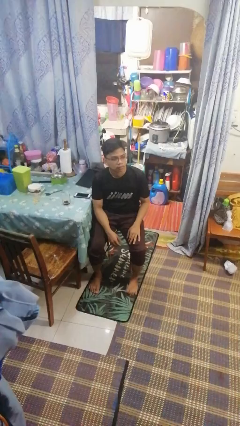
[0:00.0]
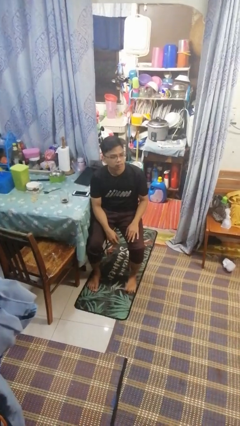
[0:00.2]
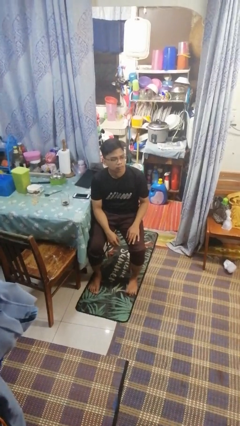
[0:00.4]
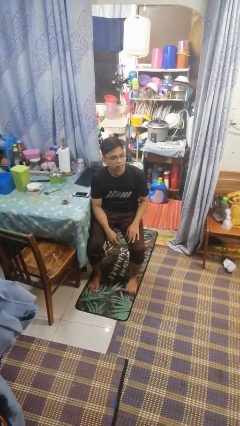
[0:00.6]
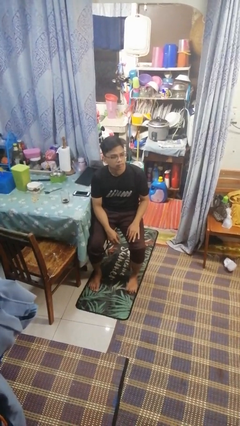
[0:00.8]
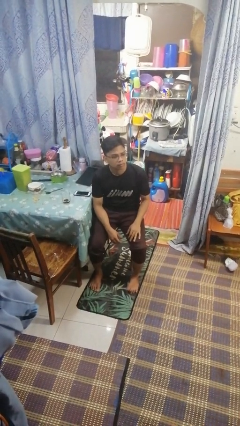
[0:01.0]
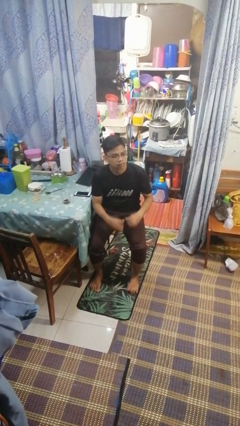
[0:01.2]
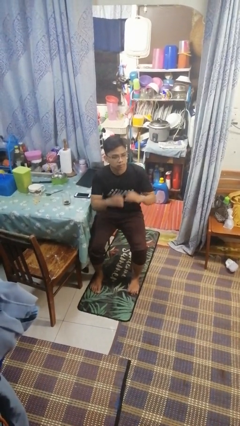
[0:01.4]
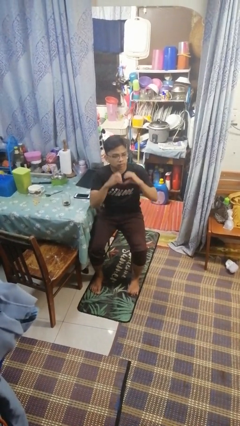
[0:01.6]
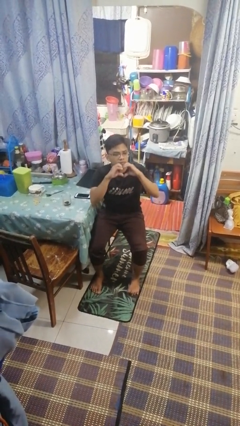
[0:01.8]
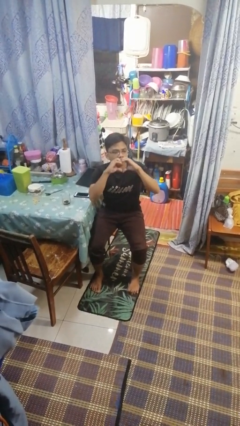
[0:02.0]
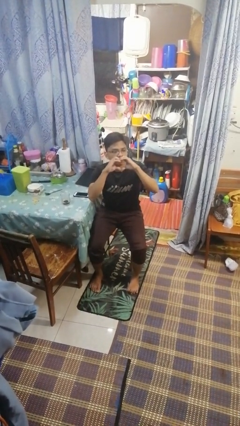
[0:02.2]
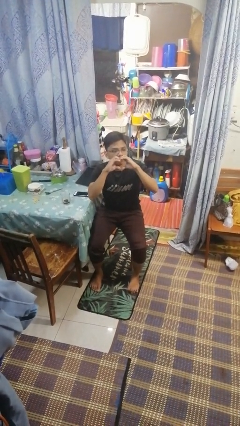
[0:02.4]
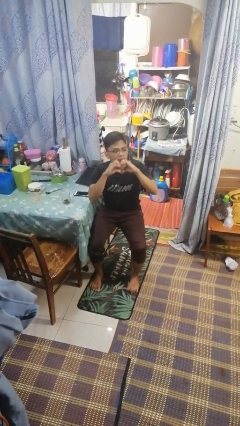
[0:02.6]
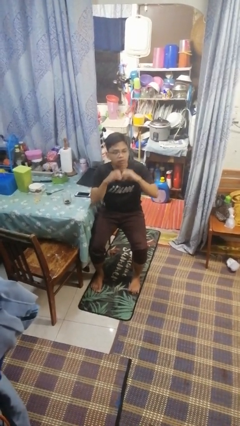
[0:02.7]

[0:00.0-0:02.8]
person gestures heart

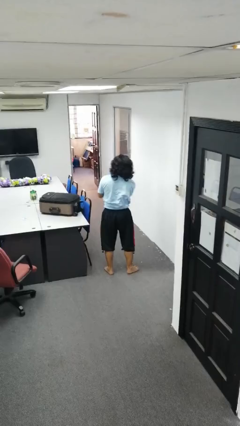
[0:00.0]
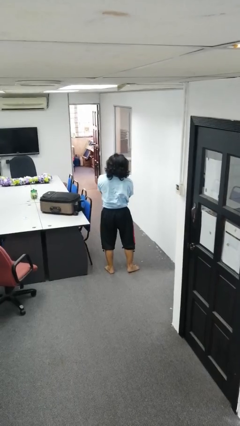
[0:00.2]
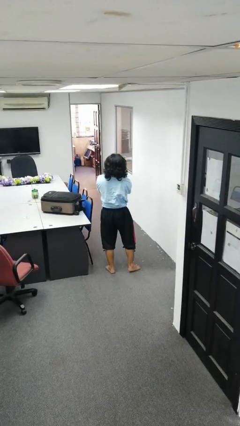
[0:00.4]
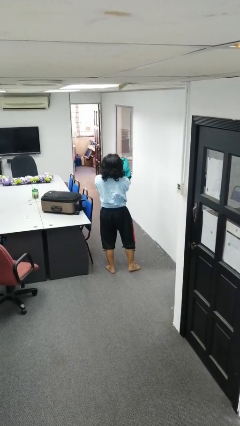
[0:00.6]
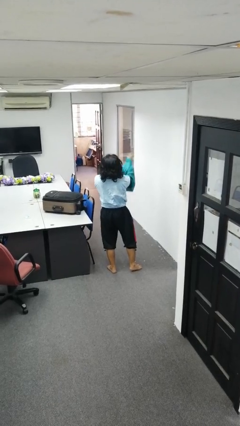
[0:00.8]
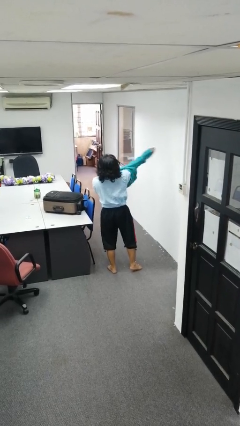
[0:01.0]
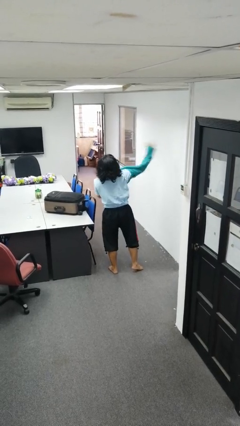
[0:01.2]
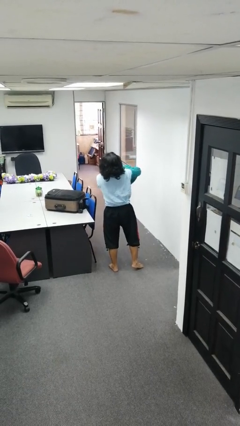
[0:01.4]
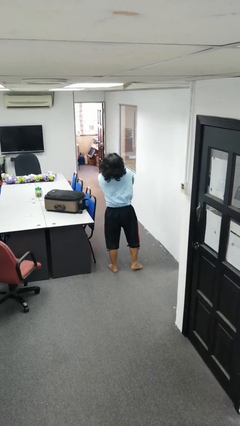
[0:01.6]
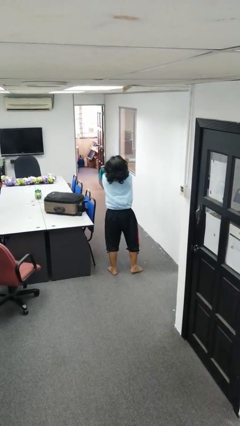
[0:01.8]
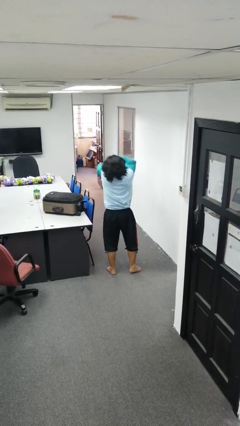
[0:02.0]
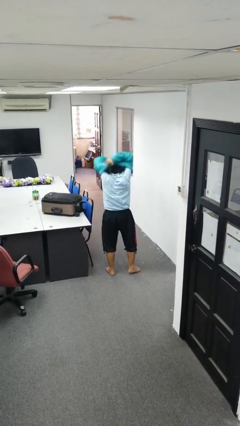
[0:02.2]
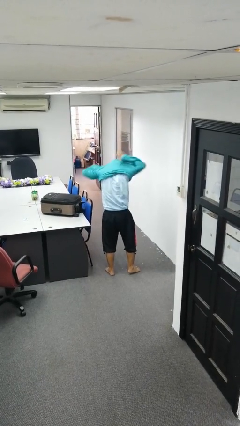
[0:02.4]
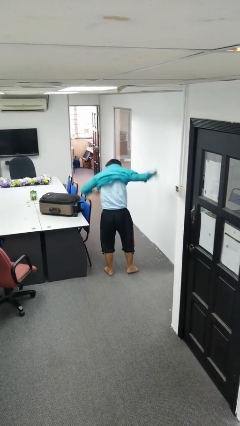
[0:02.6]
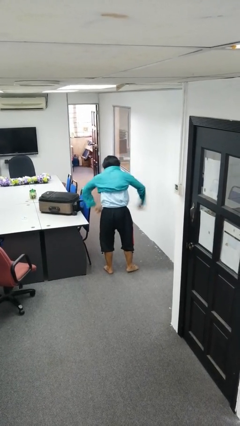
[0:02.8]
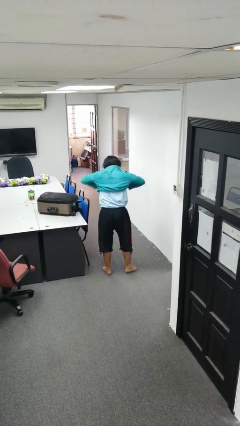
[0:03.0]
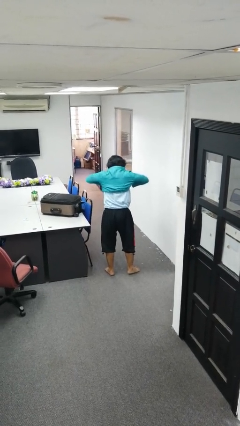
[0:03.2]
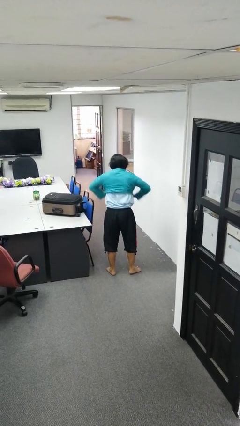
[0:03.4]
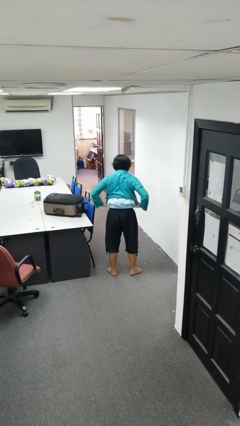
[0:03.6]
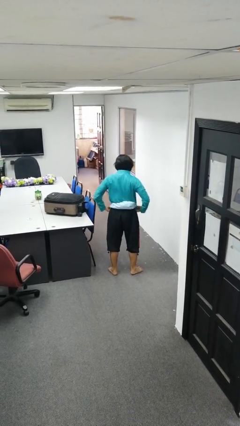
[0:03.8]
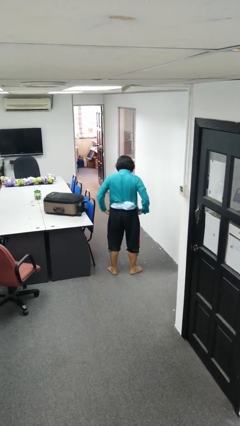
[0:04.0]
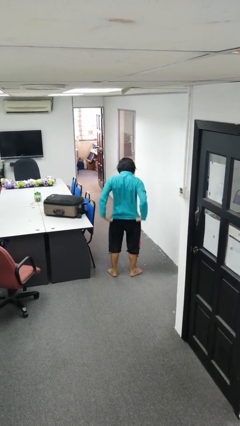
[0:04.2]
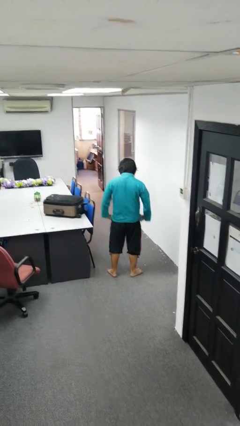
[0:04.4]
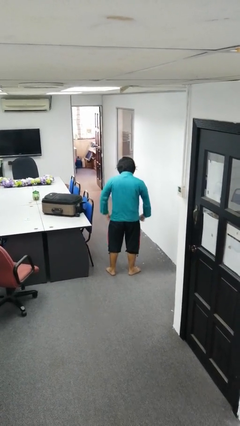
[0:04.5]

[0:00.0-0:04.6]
person puts on shirt

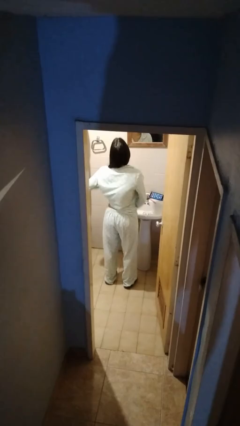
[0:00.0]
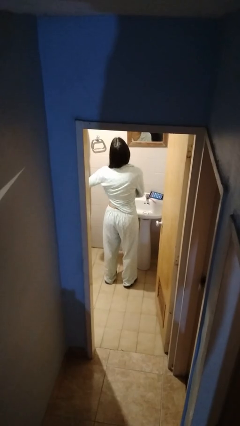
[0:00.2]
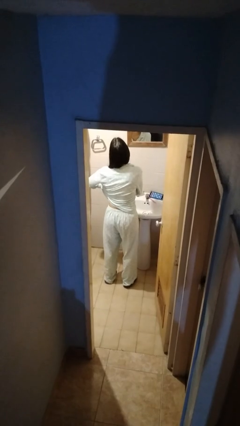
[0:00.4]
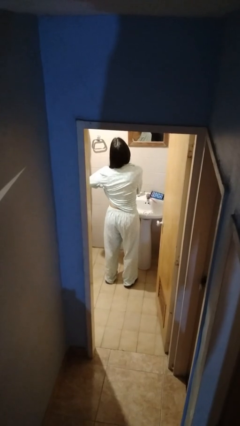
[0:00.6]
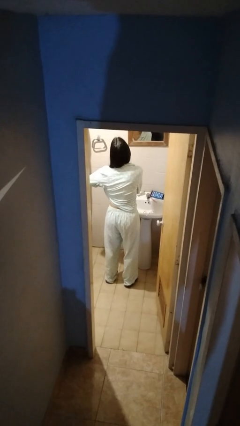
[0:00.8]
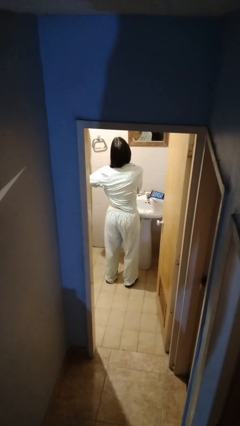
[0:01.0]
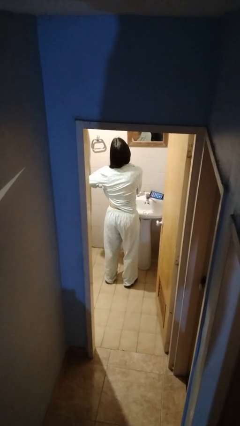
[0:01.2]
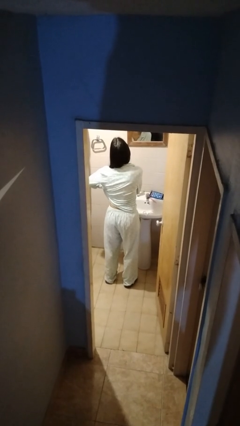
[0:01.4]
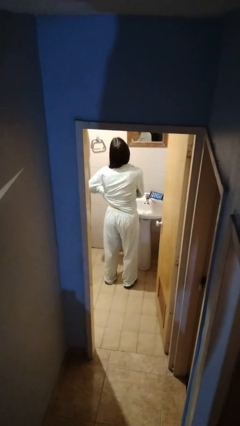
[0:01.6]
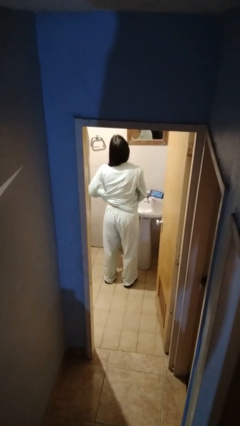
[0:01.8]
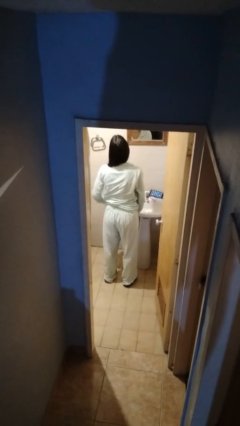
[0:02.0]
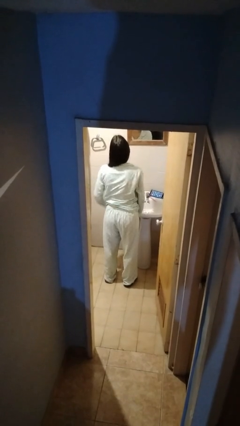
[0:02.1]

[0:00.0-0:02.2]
person applies deodorant

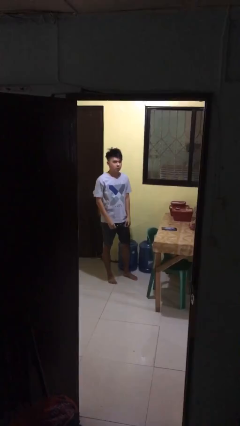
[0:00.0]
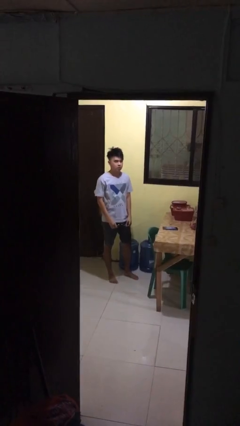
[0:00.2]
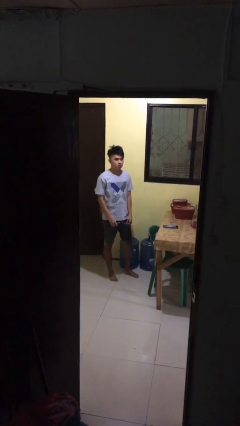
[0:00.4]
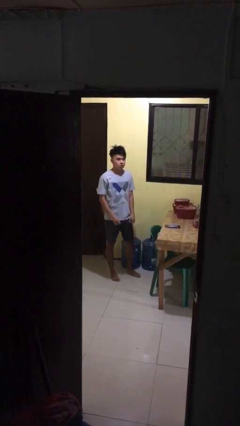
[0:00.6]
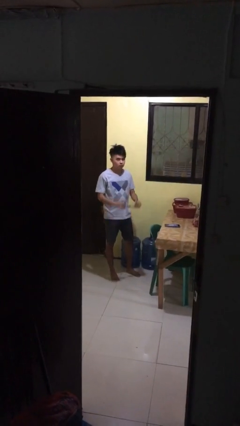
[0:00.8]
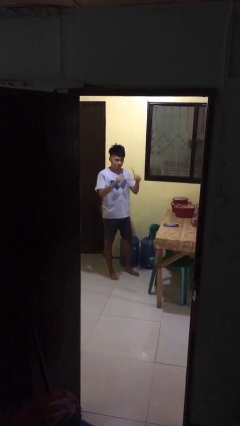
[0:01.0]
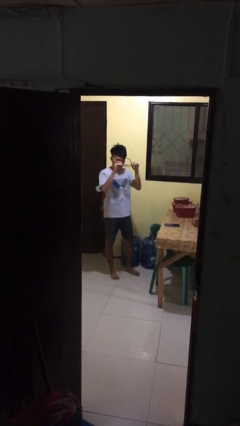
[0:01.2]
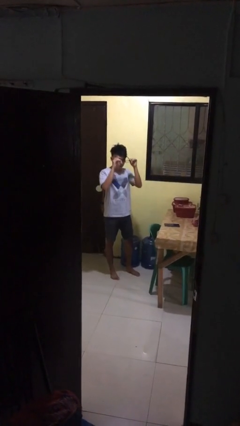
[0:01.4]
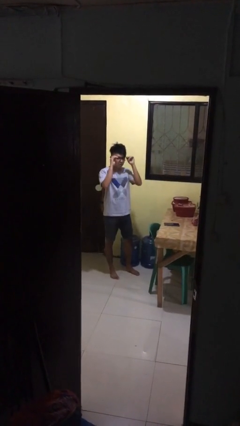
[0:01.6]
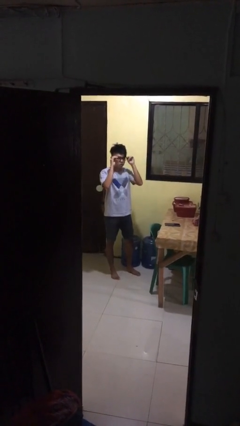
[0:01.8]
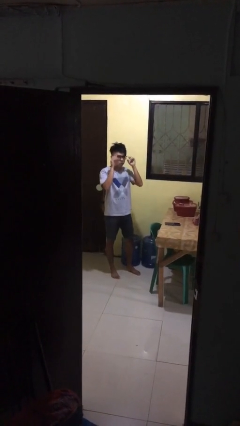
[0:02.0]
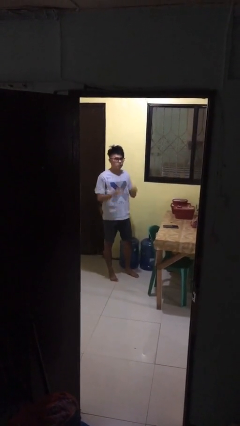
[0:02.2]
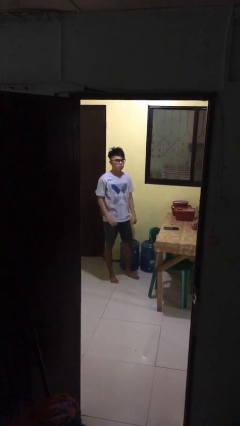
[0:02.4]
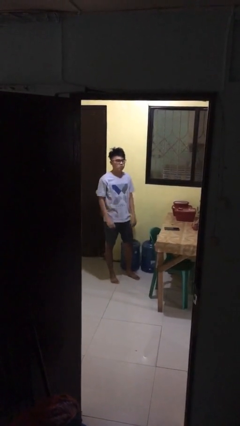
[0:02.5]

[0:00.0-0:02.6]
person puts on glasses

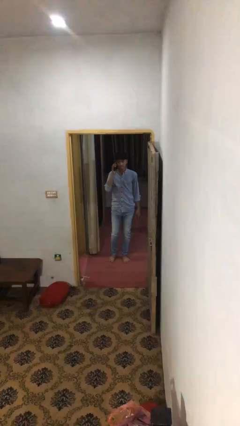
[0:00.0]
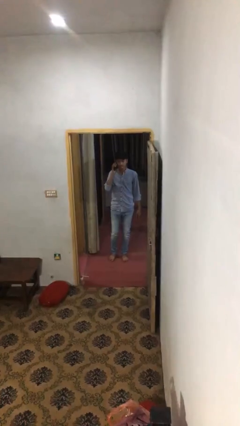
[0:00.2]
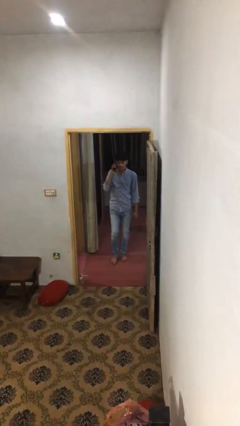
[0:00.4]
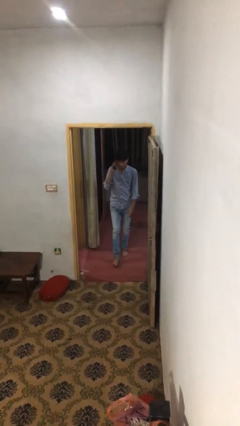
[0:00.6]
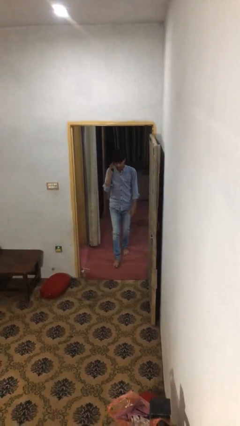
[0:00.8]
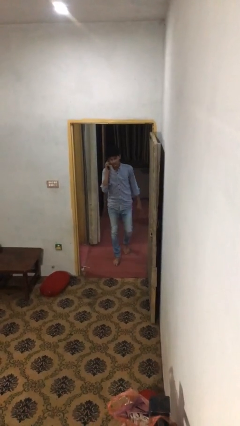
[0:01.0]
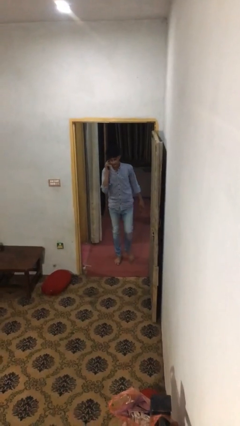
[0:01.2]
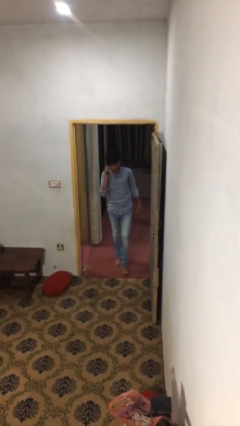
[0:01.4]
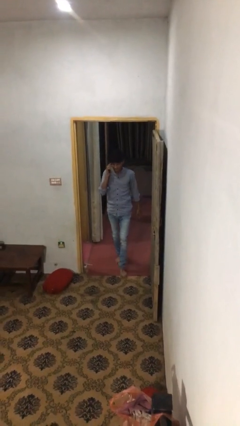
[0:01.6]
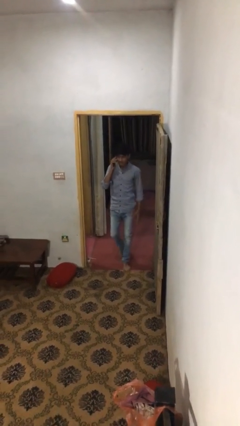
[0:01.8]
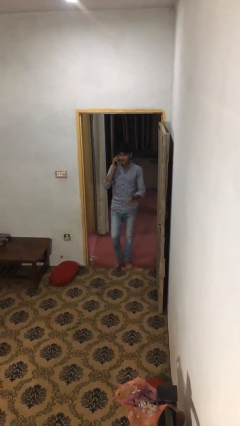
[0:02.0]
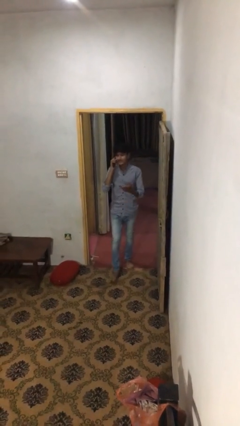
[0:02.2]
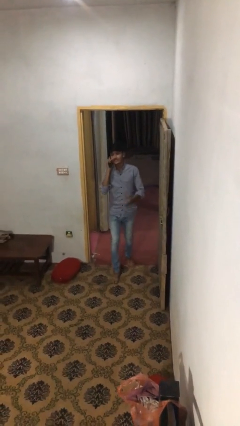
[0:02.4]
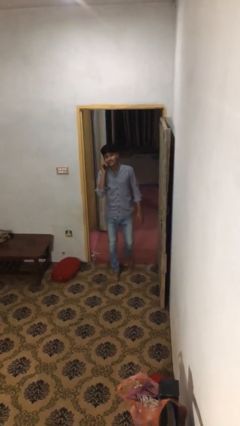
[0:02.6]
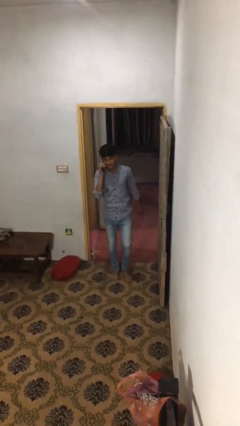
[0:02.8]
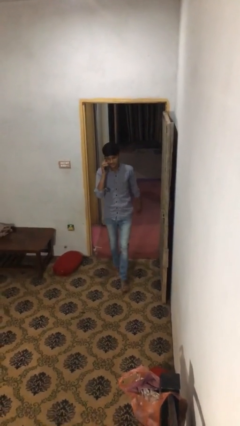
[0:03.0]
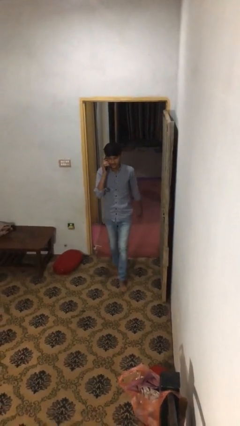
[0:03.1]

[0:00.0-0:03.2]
person enters scene through structure

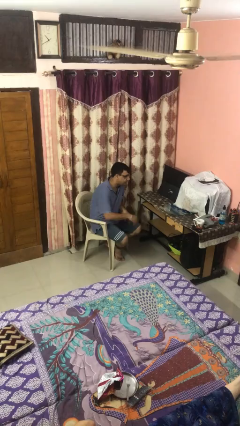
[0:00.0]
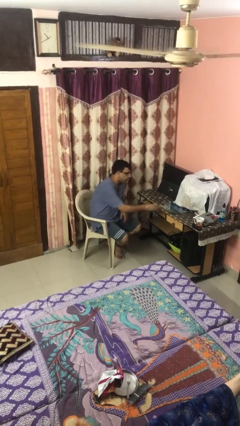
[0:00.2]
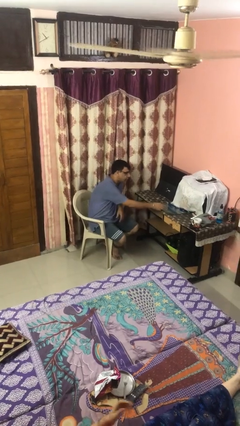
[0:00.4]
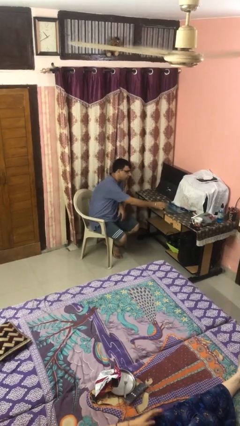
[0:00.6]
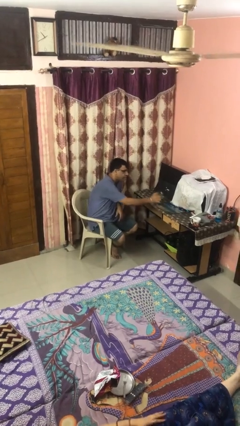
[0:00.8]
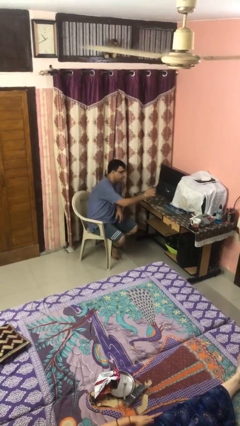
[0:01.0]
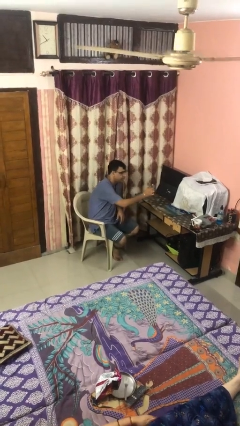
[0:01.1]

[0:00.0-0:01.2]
person picks up object from table

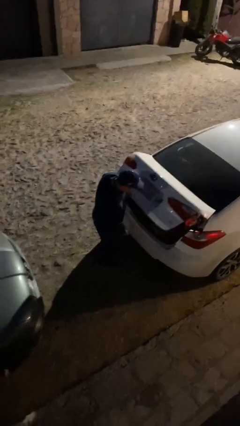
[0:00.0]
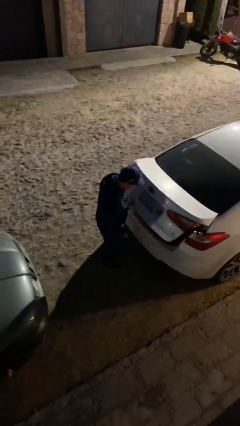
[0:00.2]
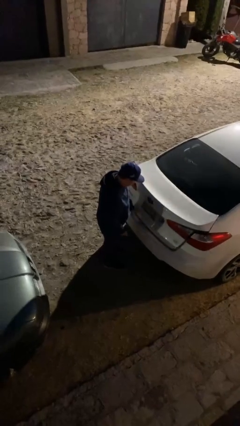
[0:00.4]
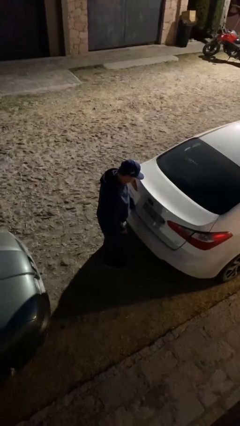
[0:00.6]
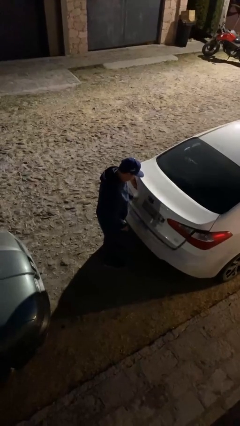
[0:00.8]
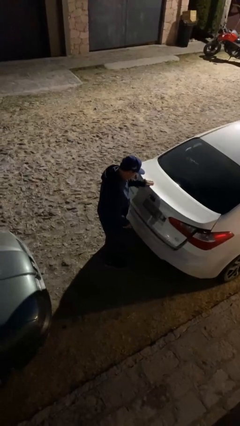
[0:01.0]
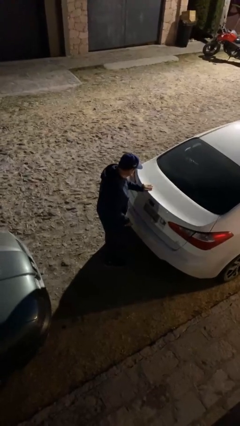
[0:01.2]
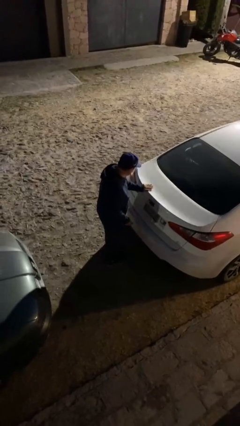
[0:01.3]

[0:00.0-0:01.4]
person closes car trunk
